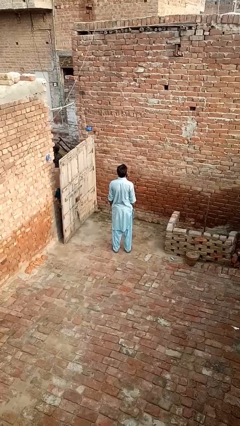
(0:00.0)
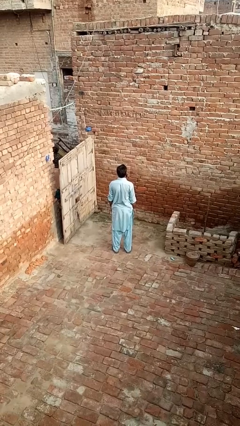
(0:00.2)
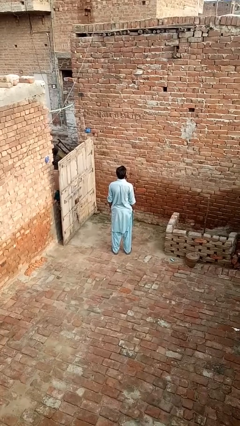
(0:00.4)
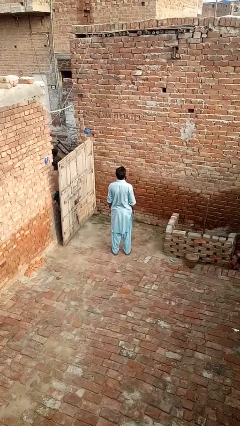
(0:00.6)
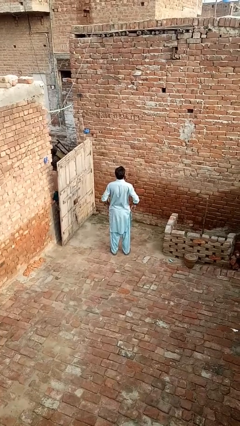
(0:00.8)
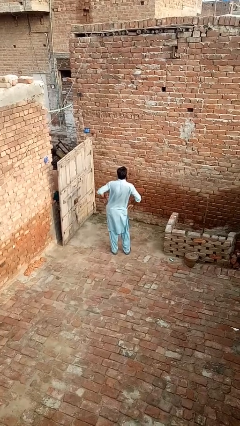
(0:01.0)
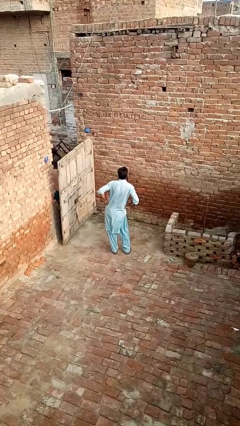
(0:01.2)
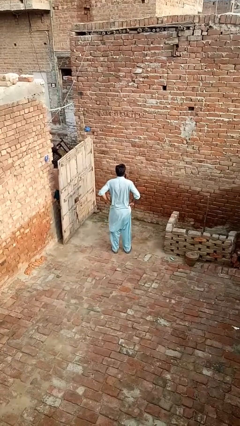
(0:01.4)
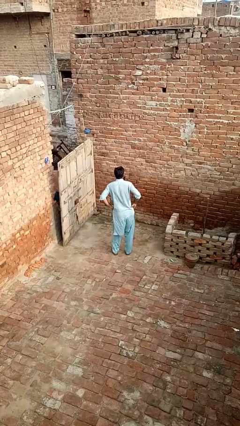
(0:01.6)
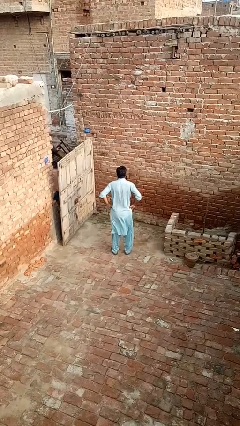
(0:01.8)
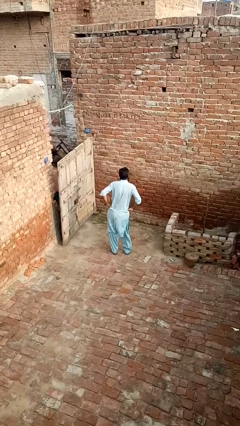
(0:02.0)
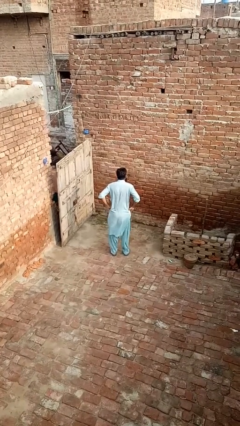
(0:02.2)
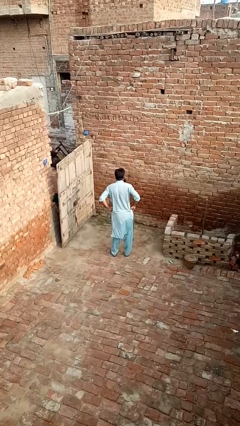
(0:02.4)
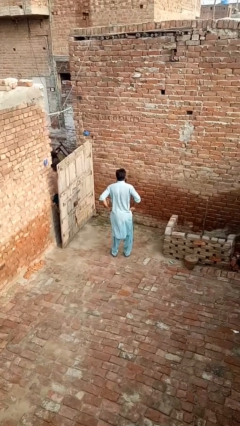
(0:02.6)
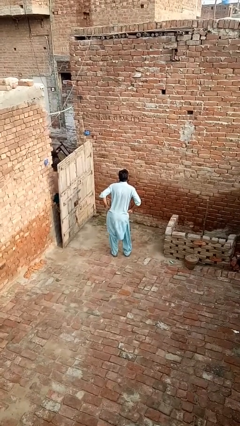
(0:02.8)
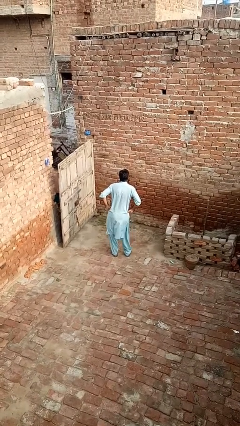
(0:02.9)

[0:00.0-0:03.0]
person wiggles hips

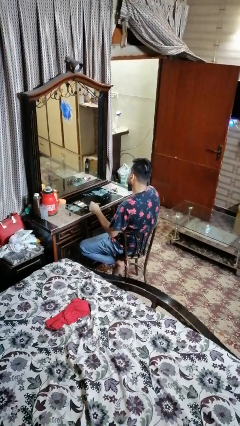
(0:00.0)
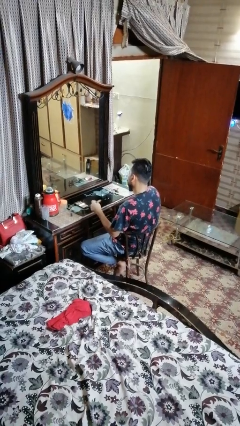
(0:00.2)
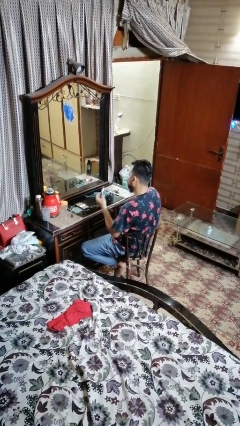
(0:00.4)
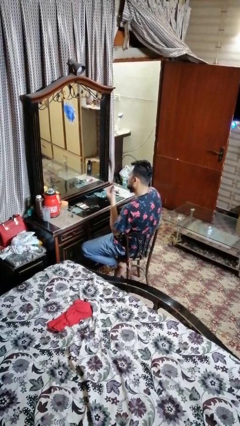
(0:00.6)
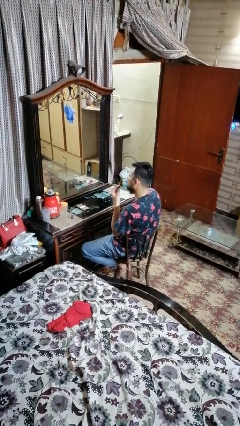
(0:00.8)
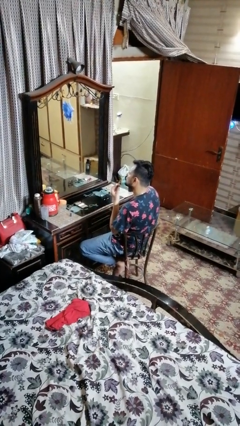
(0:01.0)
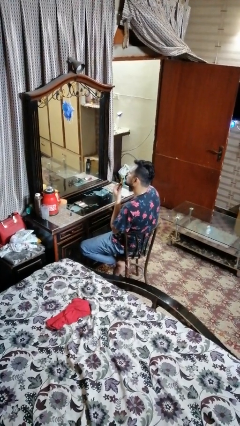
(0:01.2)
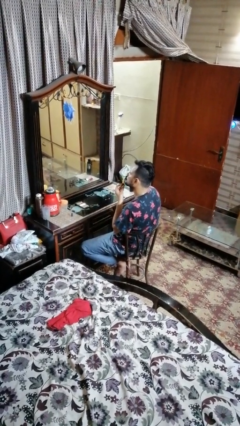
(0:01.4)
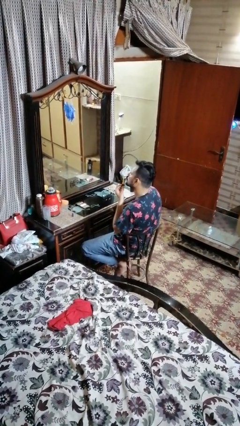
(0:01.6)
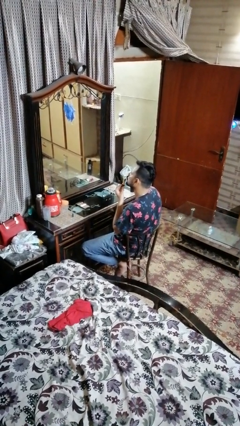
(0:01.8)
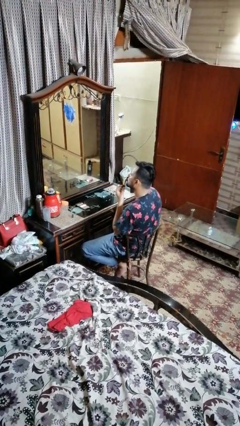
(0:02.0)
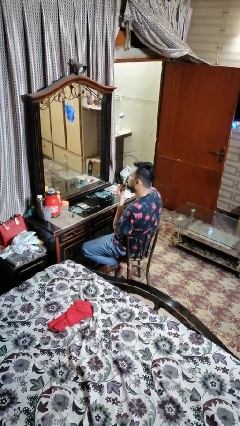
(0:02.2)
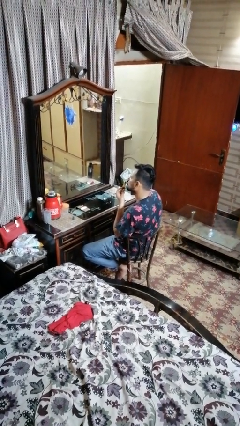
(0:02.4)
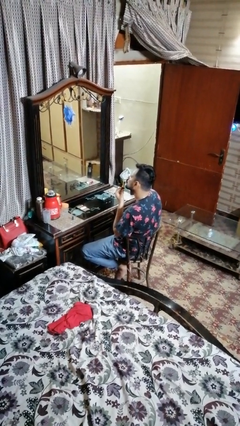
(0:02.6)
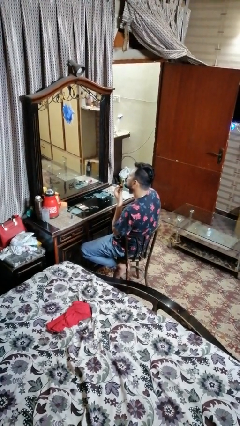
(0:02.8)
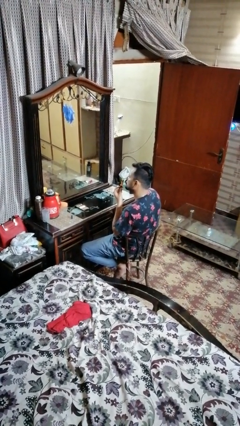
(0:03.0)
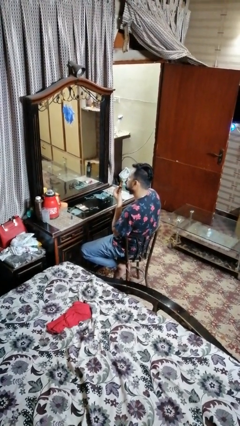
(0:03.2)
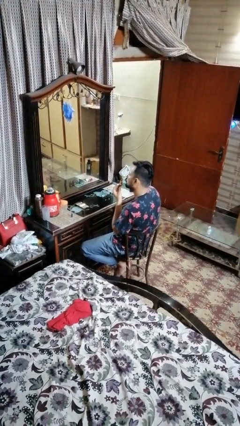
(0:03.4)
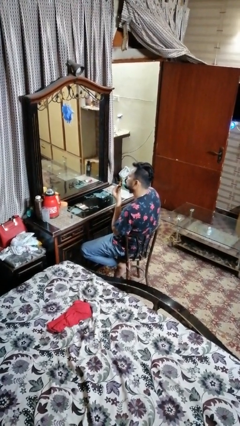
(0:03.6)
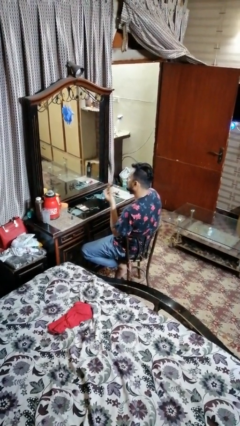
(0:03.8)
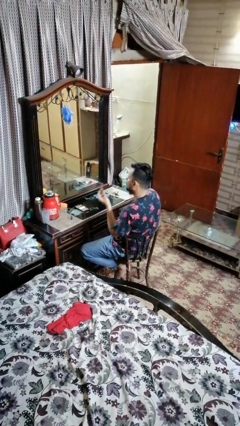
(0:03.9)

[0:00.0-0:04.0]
person applies lip makeup

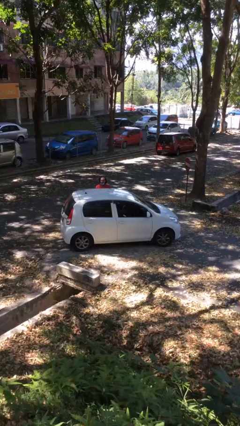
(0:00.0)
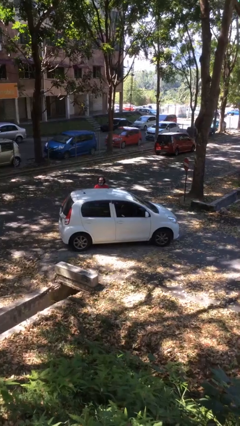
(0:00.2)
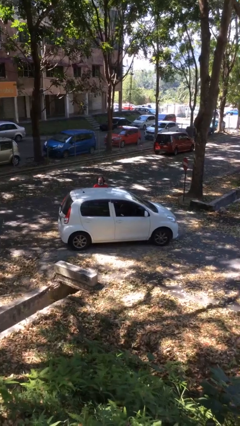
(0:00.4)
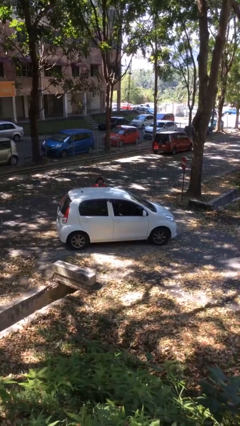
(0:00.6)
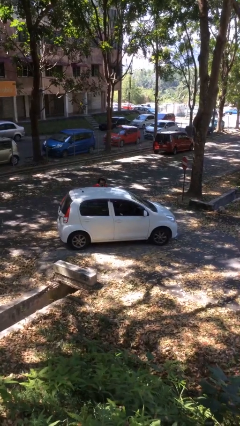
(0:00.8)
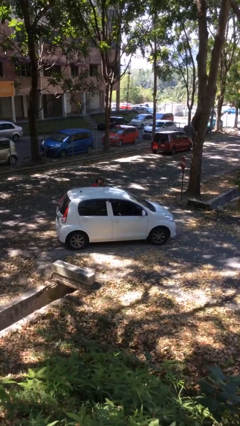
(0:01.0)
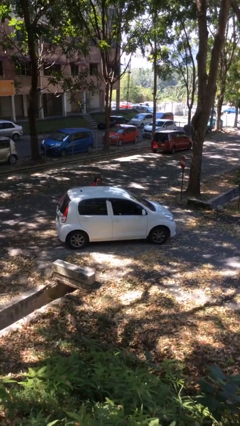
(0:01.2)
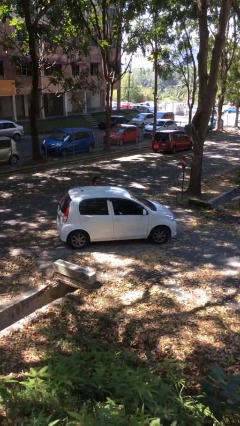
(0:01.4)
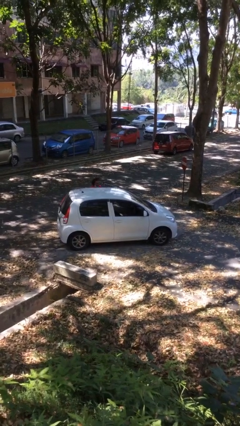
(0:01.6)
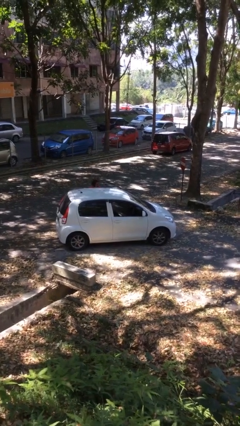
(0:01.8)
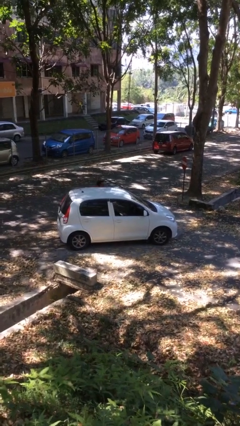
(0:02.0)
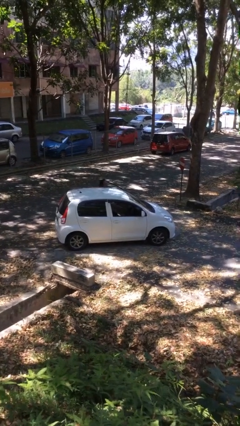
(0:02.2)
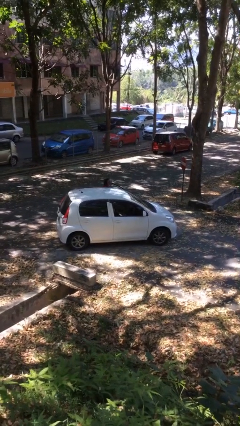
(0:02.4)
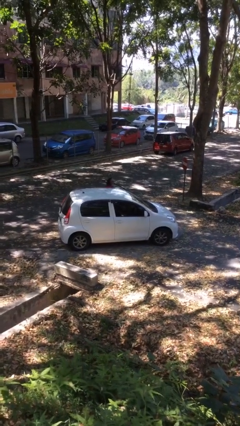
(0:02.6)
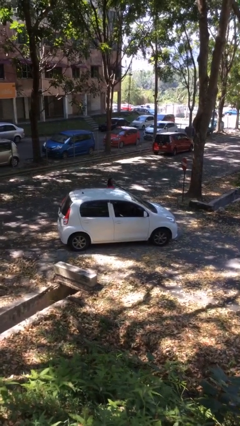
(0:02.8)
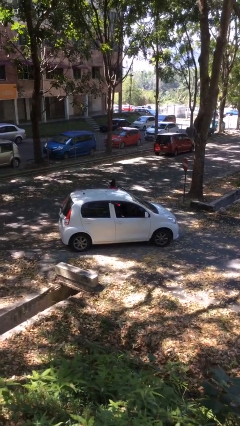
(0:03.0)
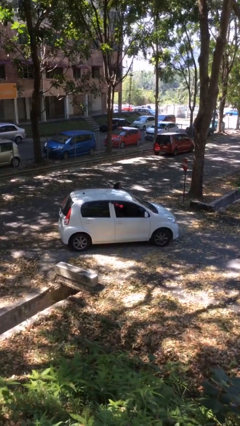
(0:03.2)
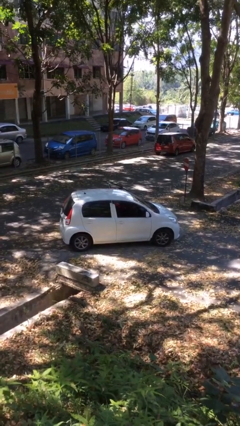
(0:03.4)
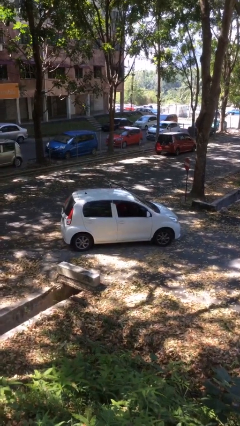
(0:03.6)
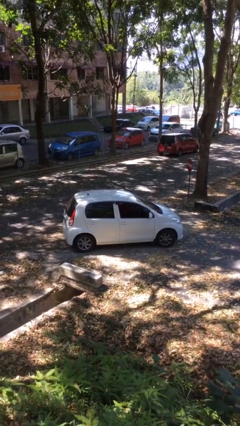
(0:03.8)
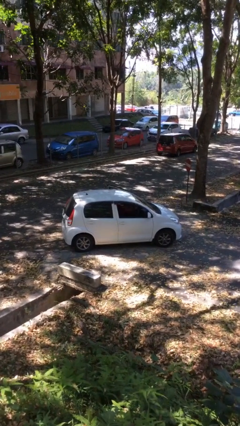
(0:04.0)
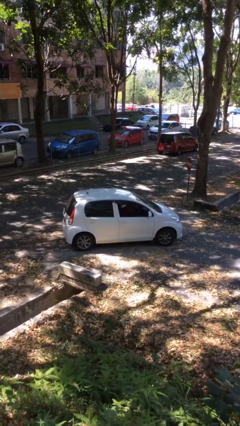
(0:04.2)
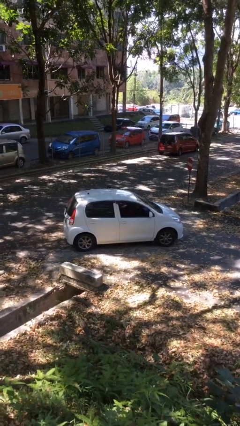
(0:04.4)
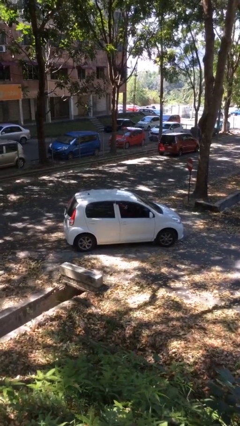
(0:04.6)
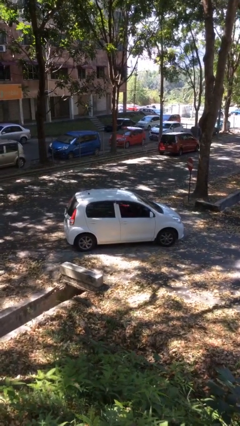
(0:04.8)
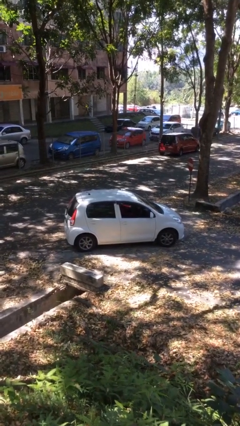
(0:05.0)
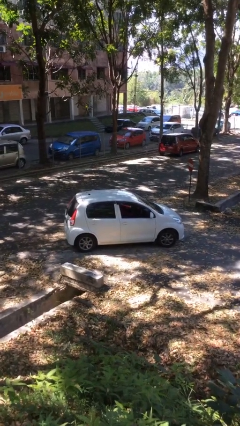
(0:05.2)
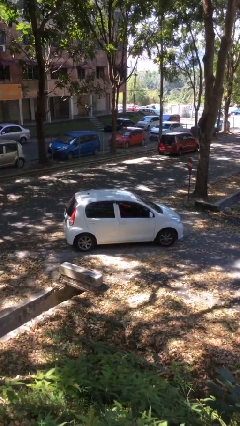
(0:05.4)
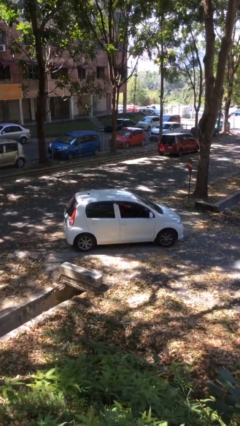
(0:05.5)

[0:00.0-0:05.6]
car picks up person

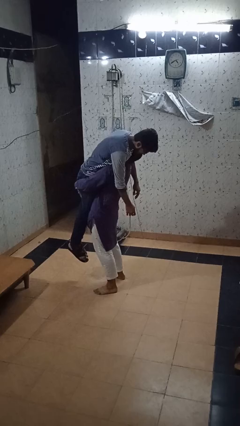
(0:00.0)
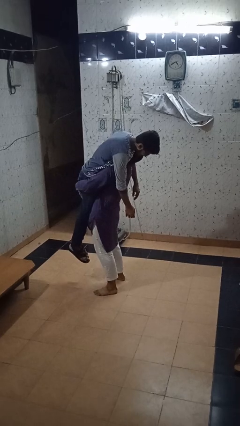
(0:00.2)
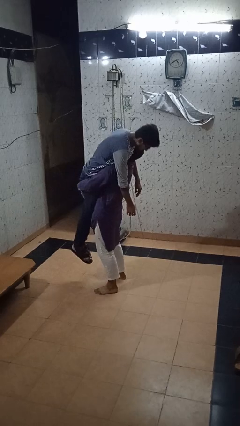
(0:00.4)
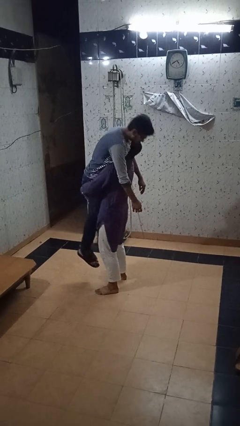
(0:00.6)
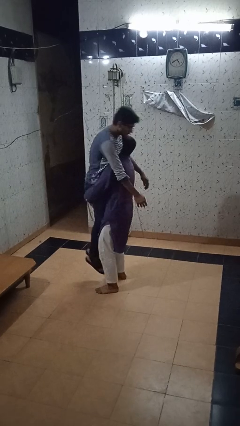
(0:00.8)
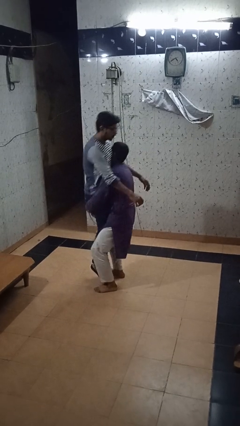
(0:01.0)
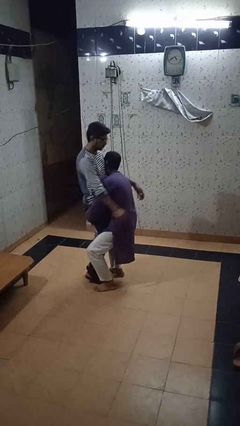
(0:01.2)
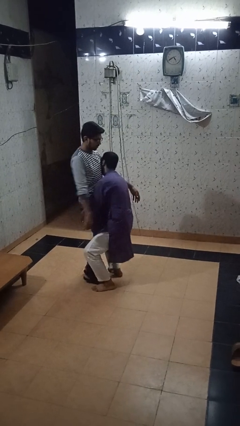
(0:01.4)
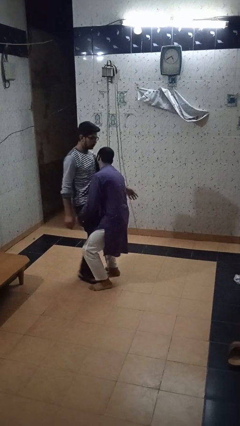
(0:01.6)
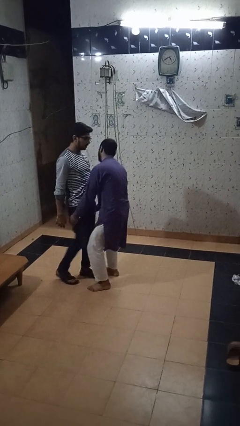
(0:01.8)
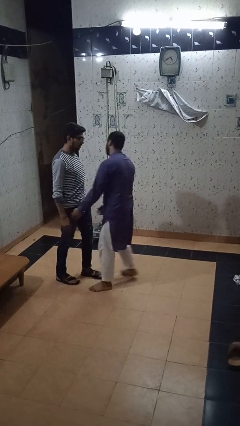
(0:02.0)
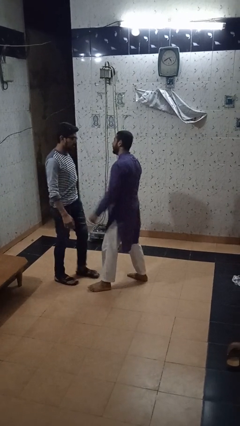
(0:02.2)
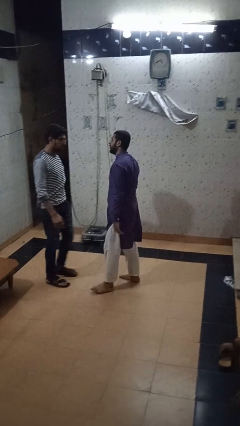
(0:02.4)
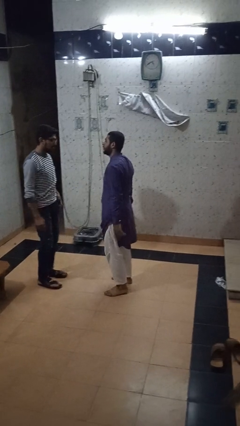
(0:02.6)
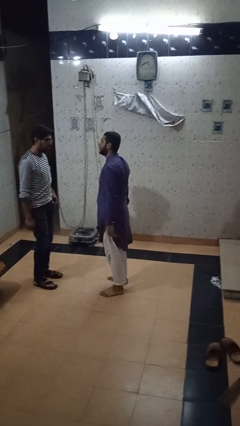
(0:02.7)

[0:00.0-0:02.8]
person puts down person

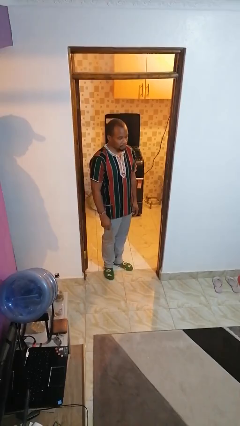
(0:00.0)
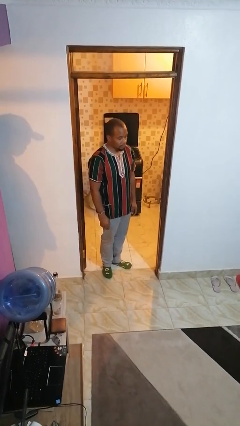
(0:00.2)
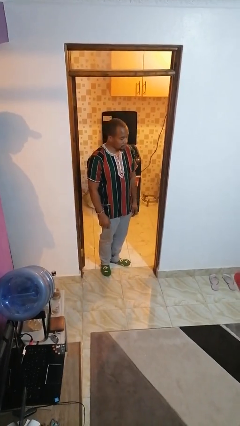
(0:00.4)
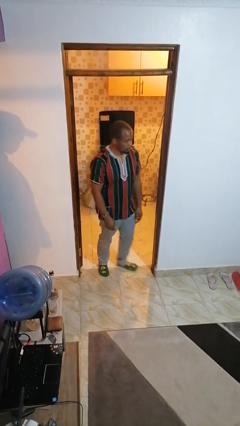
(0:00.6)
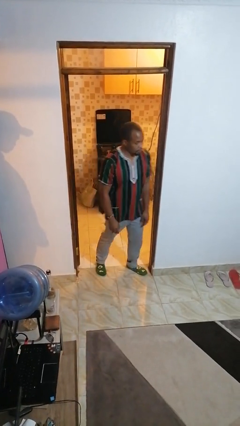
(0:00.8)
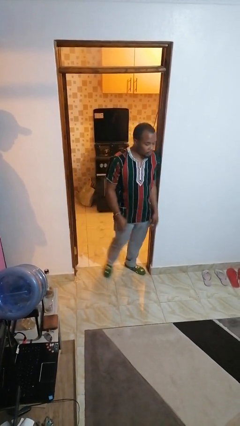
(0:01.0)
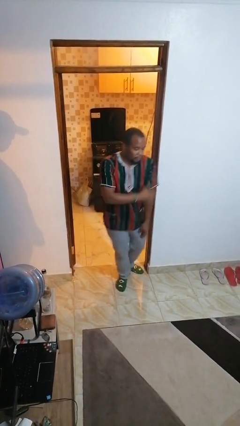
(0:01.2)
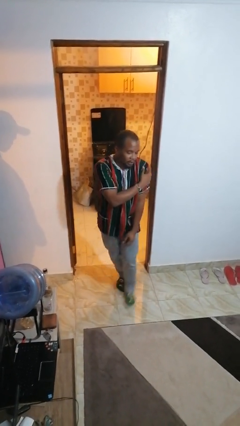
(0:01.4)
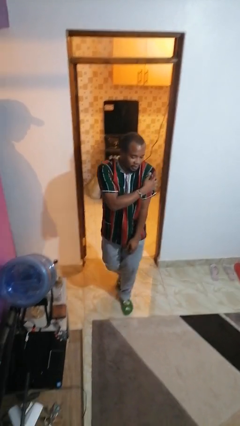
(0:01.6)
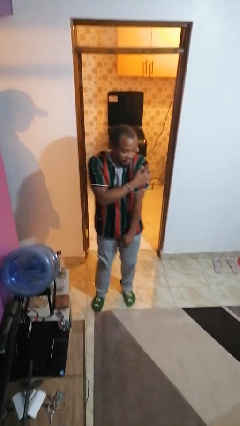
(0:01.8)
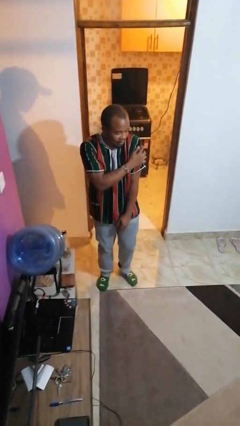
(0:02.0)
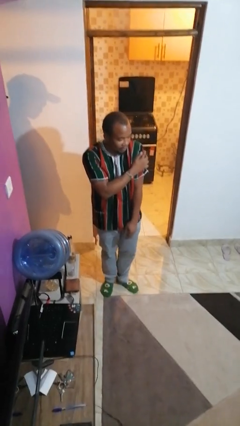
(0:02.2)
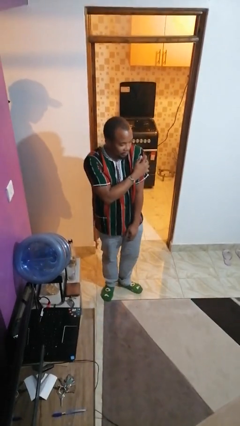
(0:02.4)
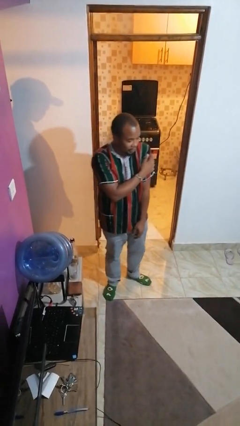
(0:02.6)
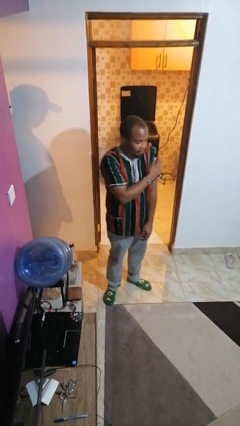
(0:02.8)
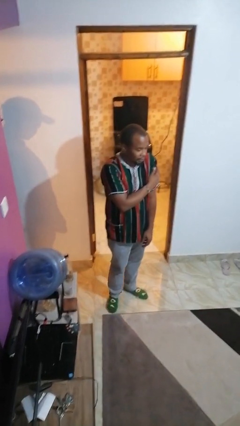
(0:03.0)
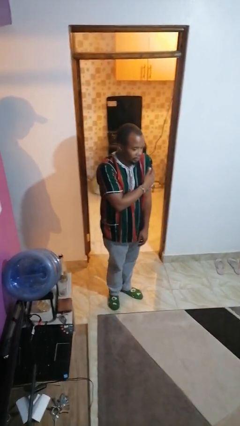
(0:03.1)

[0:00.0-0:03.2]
person bumps into wall
